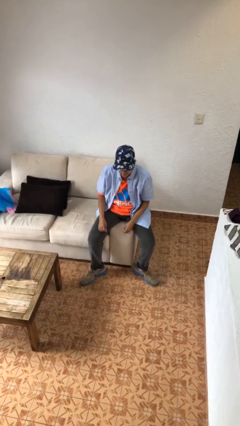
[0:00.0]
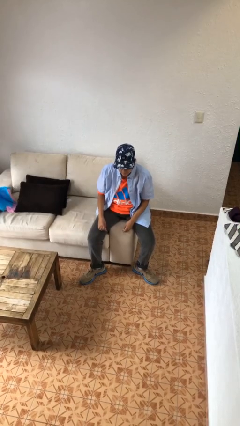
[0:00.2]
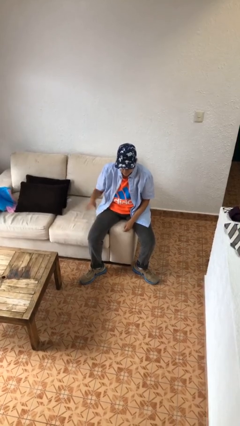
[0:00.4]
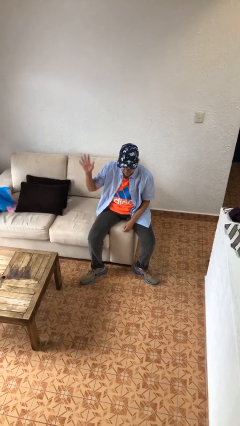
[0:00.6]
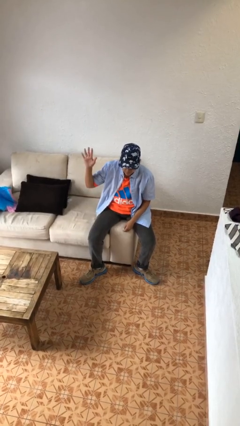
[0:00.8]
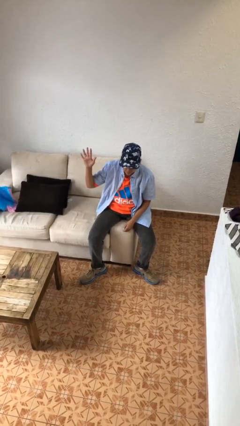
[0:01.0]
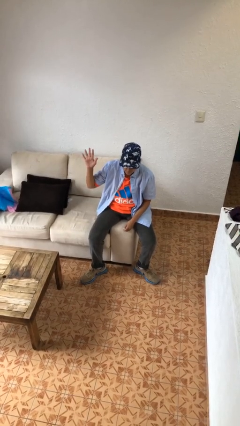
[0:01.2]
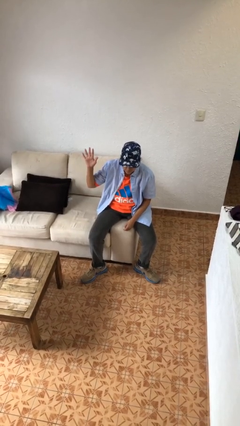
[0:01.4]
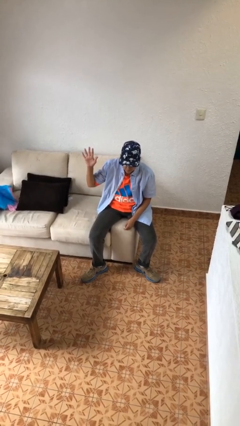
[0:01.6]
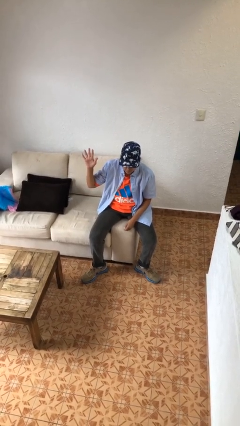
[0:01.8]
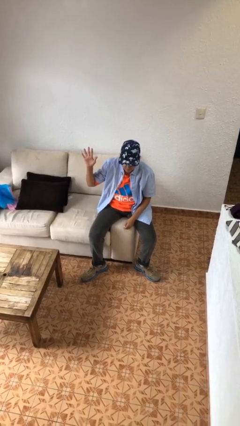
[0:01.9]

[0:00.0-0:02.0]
person gestures number five

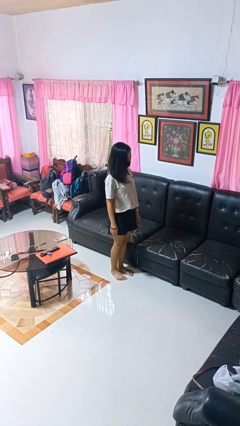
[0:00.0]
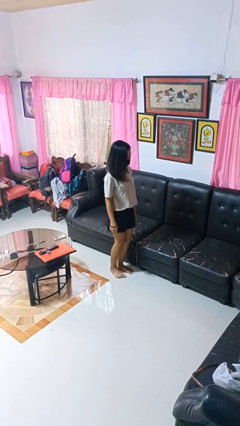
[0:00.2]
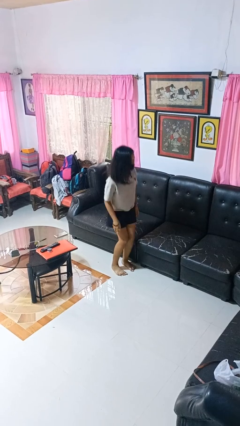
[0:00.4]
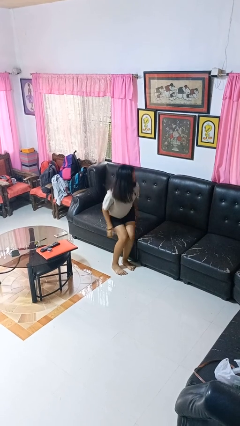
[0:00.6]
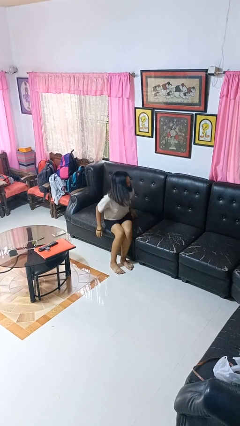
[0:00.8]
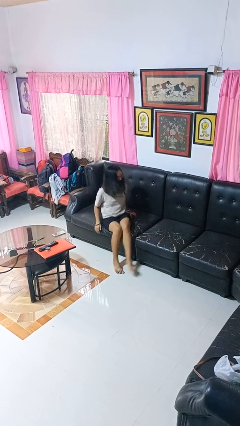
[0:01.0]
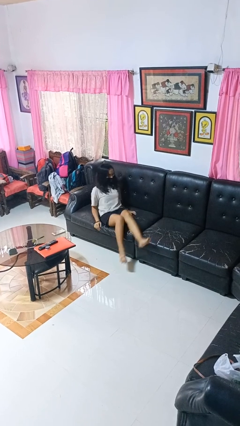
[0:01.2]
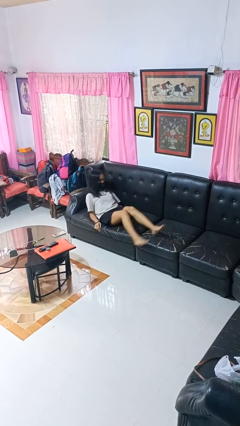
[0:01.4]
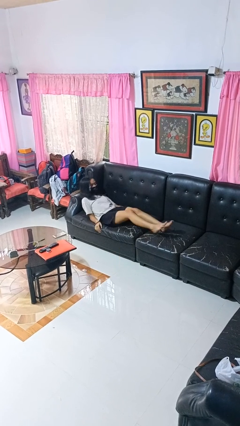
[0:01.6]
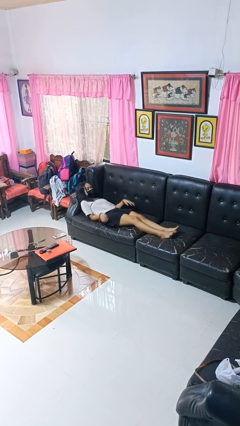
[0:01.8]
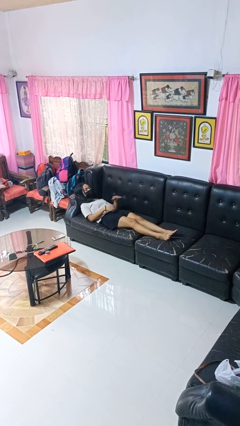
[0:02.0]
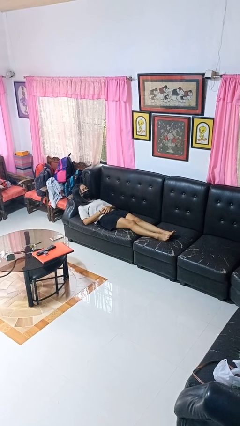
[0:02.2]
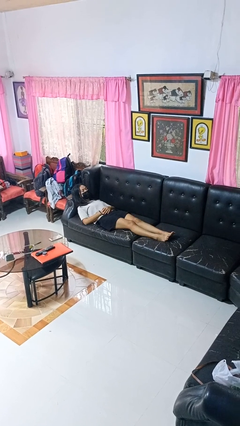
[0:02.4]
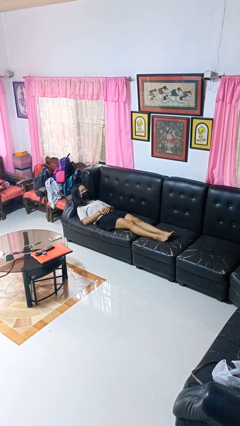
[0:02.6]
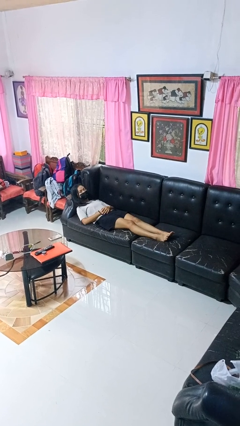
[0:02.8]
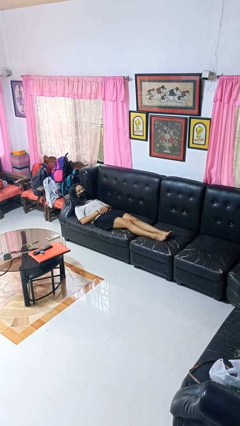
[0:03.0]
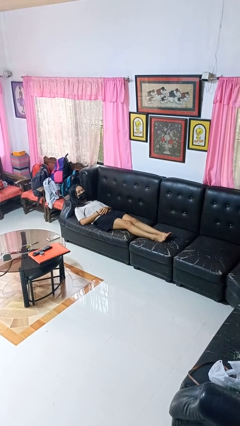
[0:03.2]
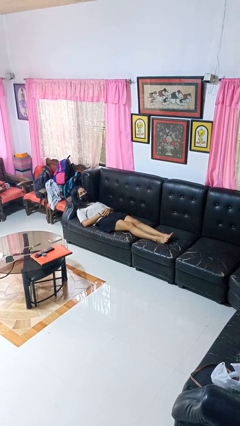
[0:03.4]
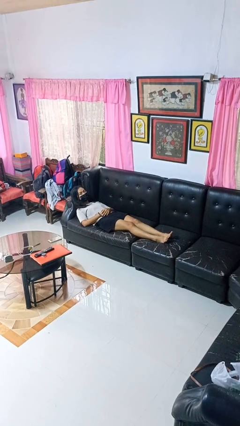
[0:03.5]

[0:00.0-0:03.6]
person lies down on couch

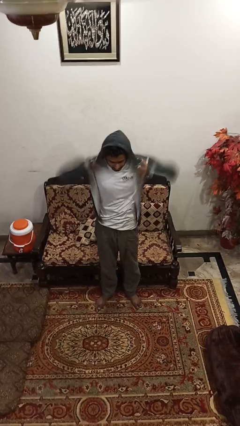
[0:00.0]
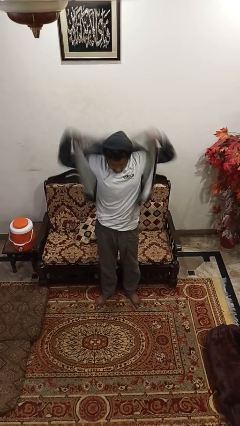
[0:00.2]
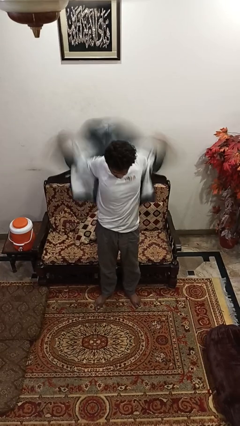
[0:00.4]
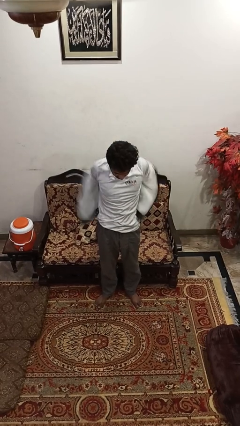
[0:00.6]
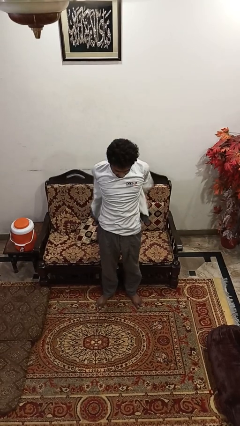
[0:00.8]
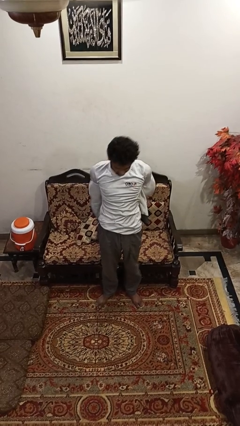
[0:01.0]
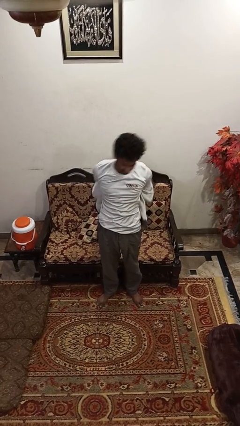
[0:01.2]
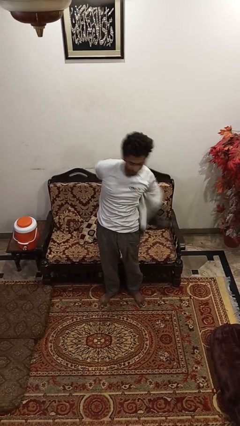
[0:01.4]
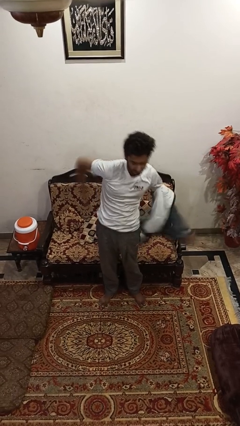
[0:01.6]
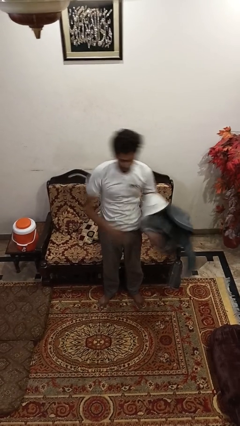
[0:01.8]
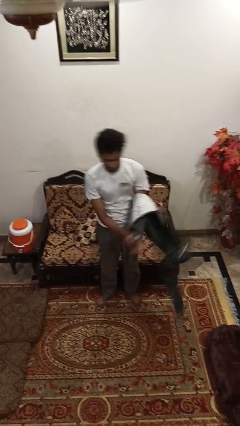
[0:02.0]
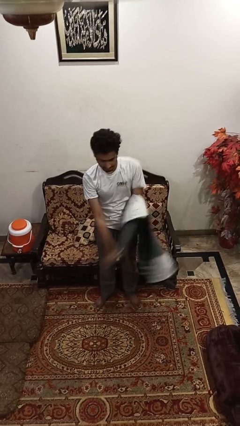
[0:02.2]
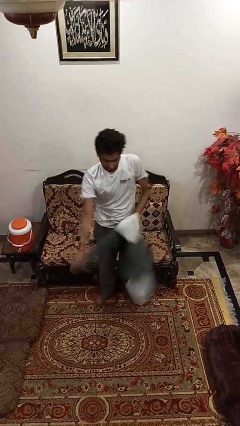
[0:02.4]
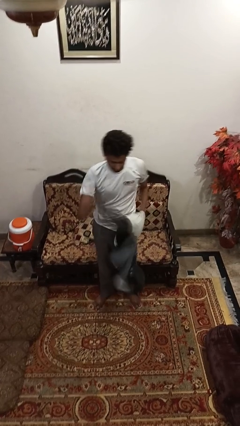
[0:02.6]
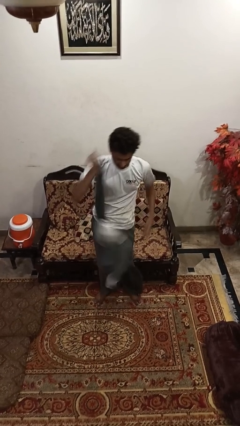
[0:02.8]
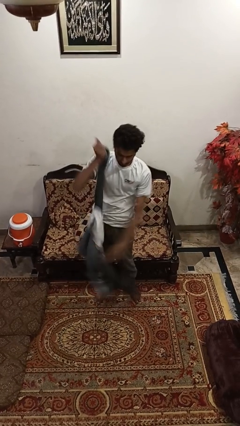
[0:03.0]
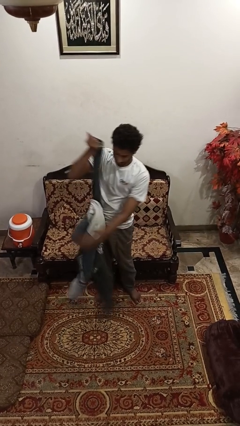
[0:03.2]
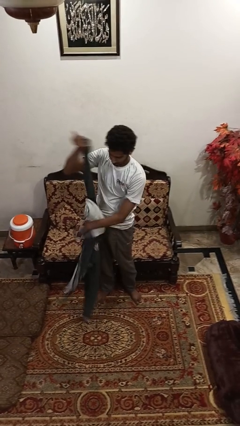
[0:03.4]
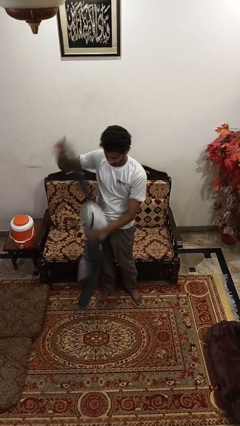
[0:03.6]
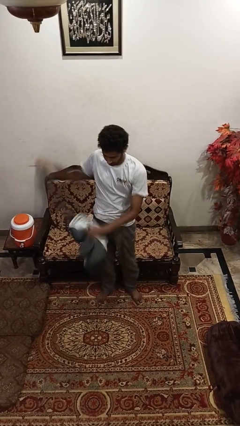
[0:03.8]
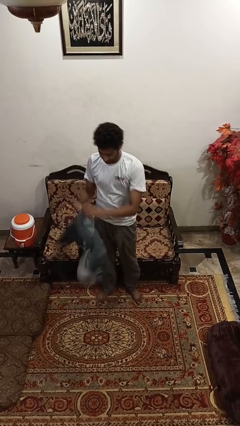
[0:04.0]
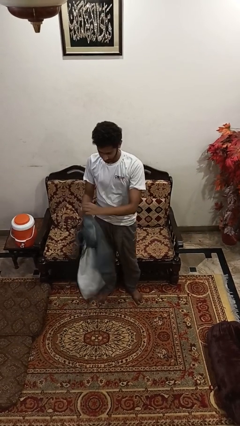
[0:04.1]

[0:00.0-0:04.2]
person takes off hoodie

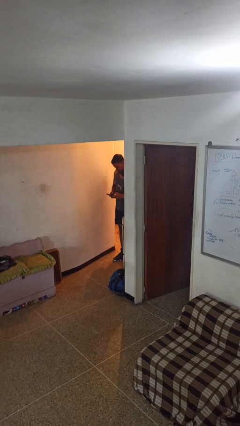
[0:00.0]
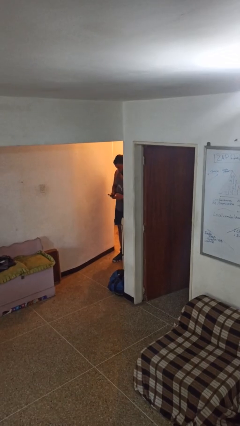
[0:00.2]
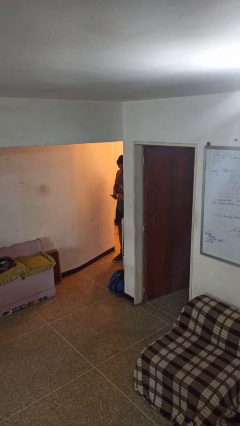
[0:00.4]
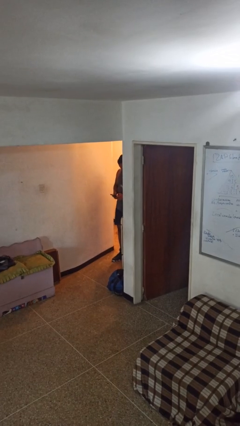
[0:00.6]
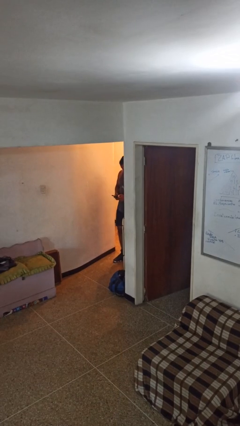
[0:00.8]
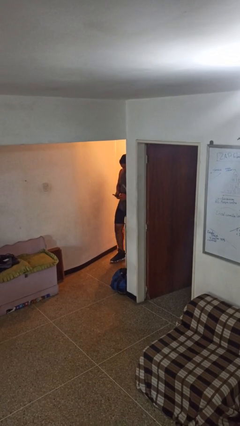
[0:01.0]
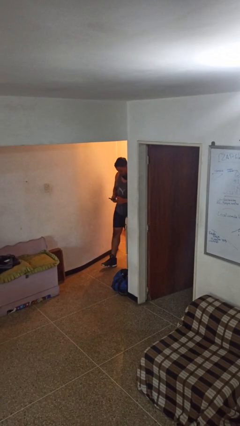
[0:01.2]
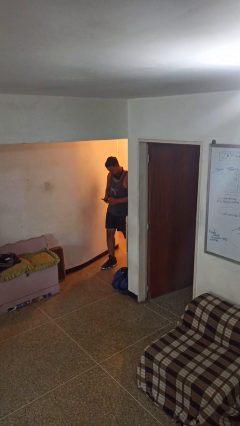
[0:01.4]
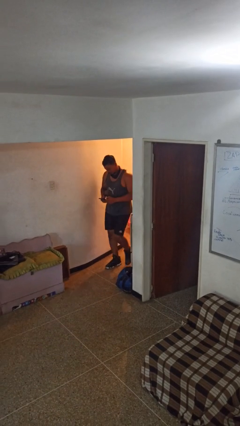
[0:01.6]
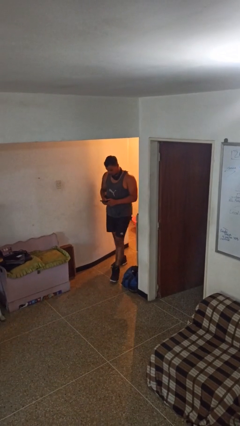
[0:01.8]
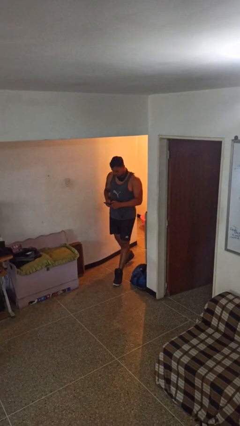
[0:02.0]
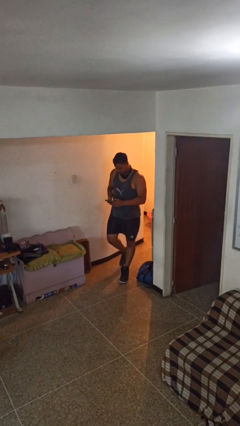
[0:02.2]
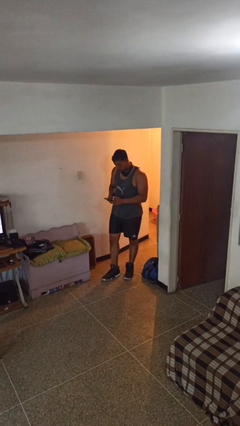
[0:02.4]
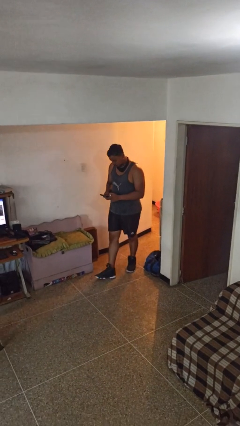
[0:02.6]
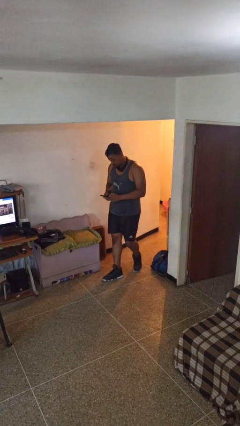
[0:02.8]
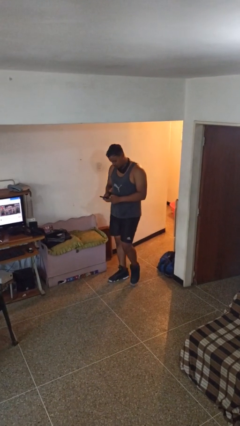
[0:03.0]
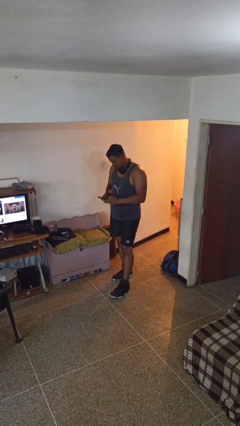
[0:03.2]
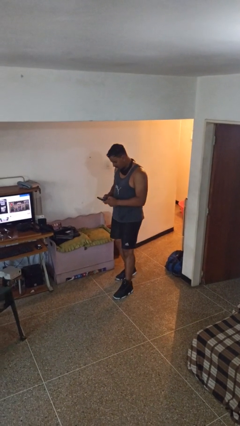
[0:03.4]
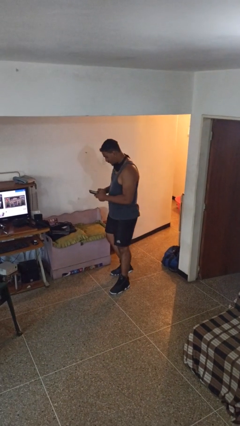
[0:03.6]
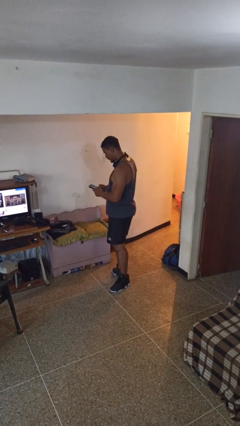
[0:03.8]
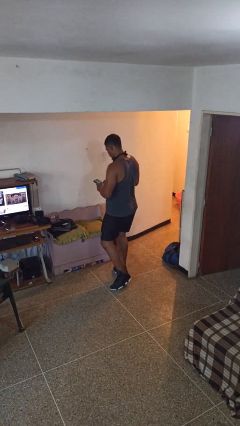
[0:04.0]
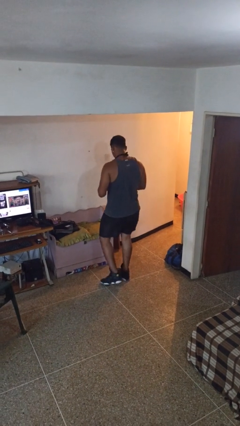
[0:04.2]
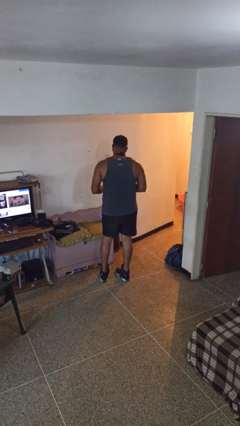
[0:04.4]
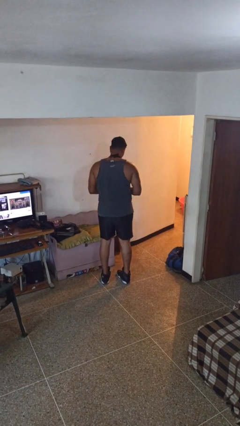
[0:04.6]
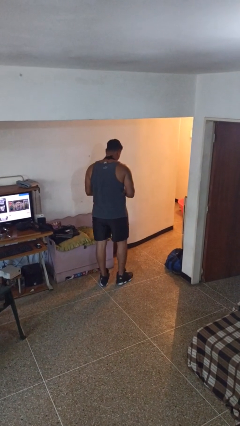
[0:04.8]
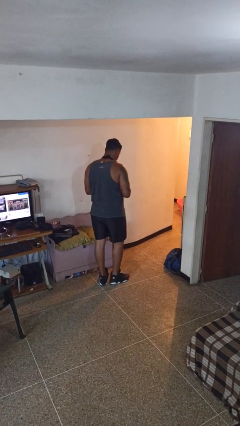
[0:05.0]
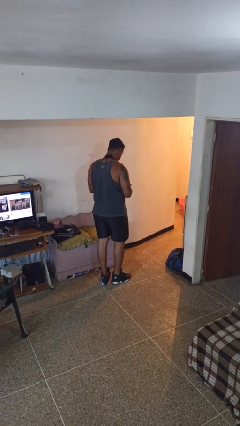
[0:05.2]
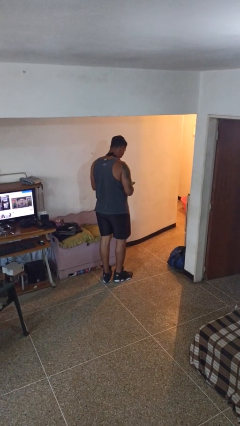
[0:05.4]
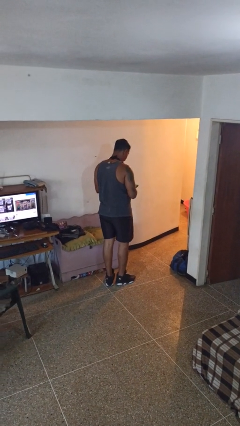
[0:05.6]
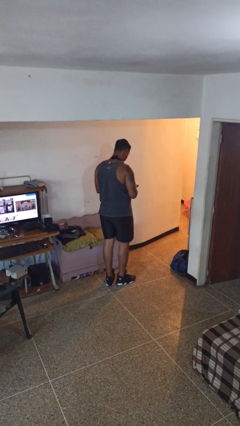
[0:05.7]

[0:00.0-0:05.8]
person enters scene through structure

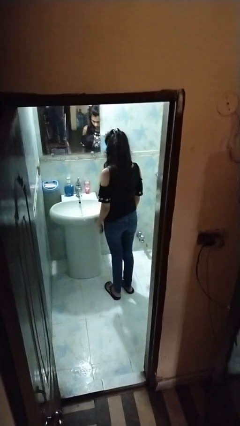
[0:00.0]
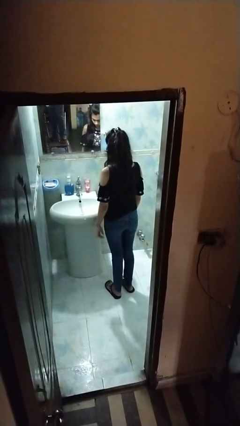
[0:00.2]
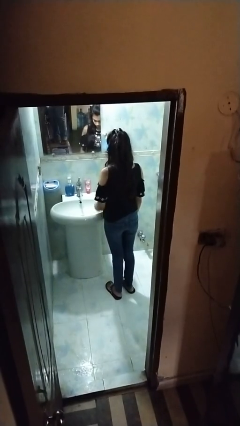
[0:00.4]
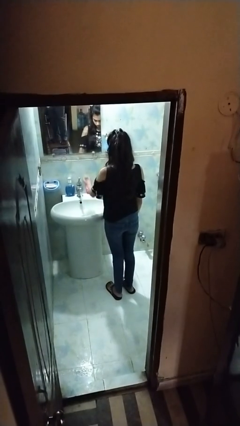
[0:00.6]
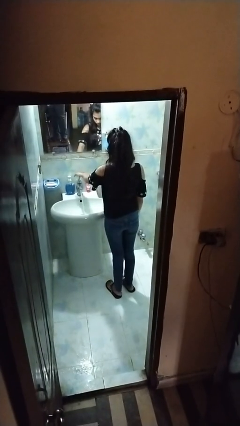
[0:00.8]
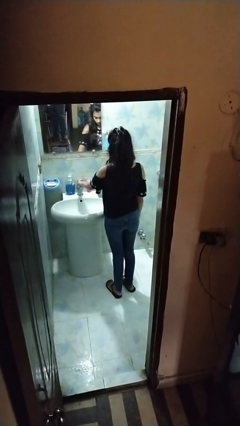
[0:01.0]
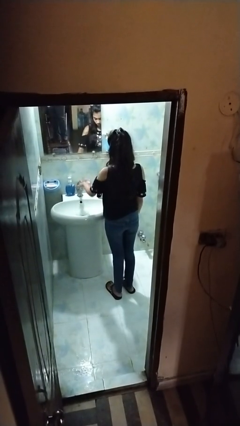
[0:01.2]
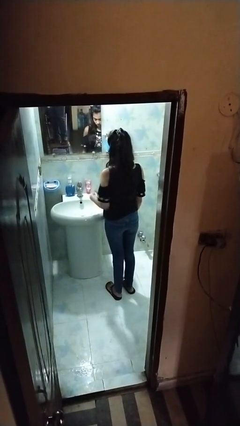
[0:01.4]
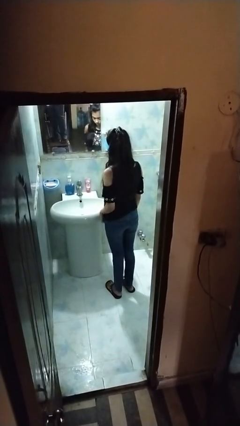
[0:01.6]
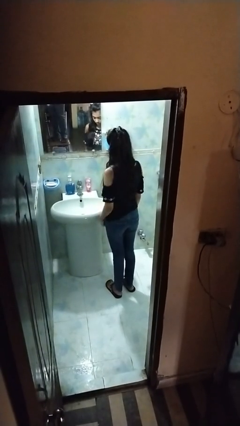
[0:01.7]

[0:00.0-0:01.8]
person turns off faucet

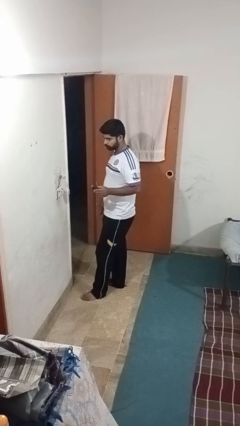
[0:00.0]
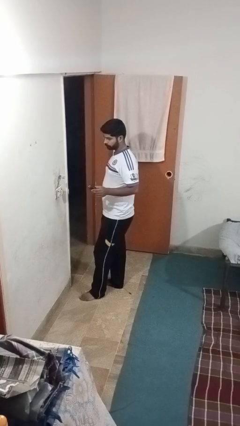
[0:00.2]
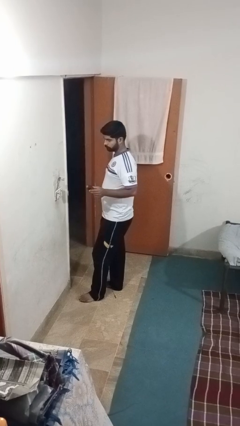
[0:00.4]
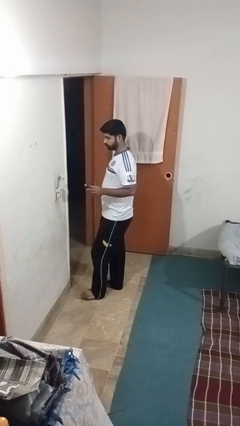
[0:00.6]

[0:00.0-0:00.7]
person unplugs from electrical socket
